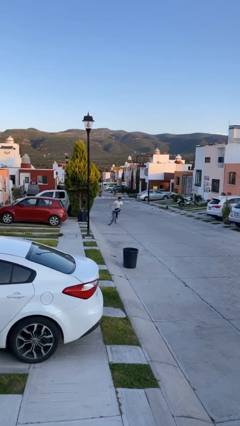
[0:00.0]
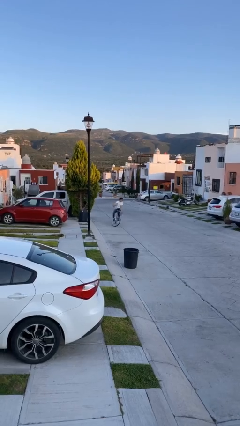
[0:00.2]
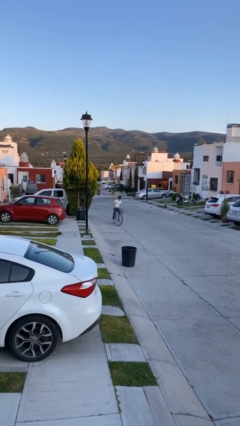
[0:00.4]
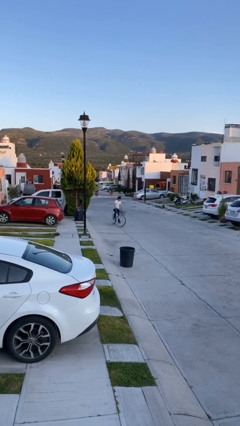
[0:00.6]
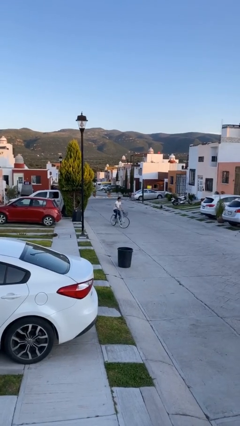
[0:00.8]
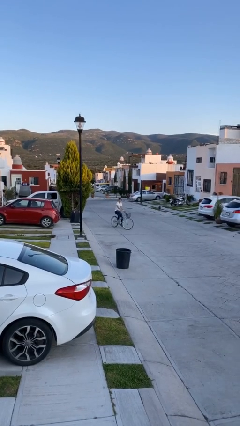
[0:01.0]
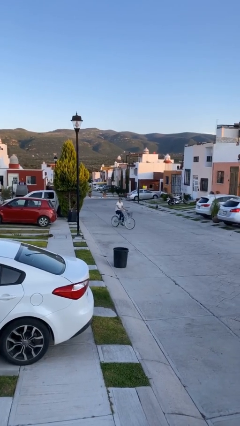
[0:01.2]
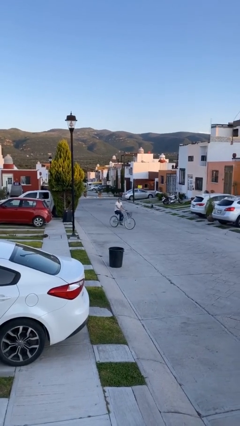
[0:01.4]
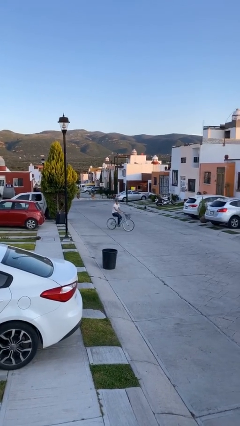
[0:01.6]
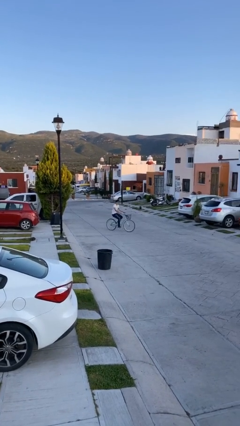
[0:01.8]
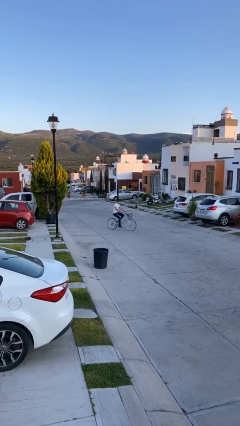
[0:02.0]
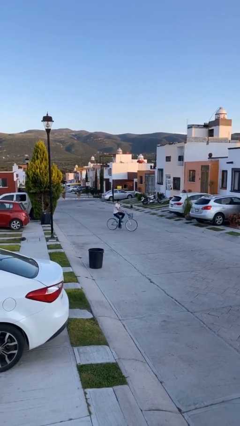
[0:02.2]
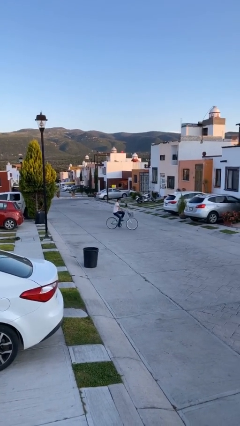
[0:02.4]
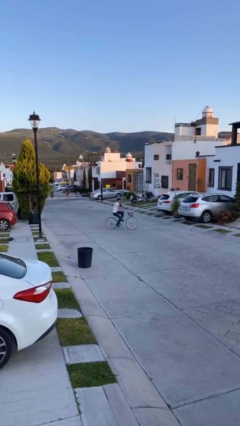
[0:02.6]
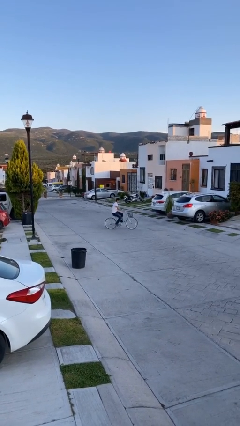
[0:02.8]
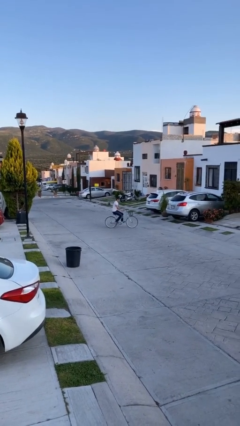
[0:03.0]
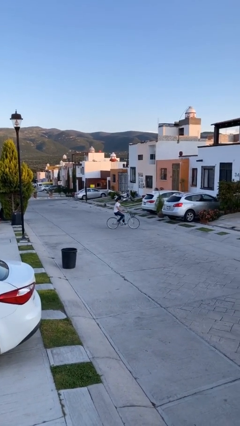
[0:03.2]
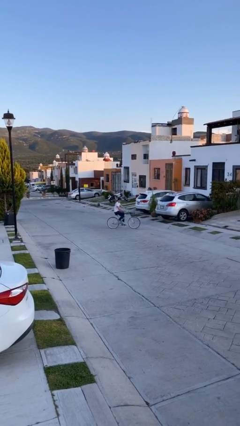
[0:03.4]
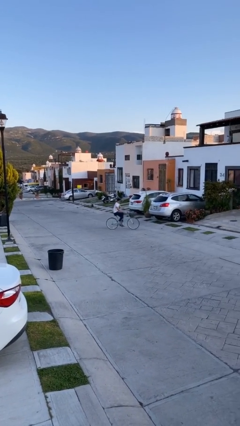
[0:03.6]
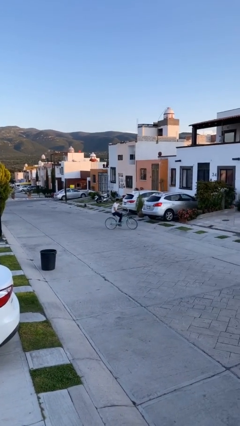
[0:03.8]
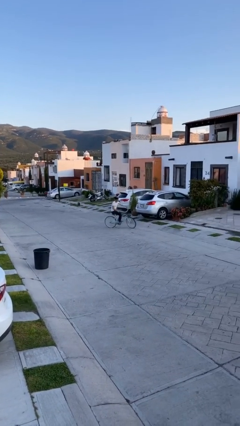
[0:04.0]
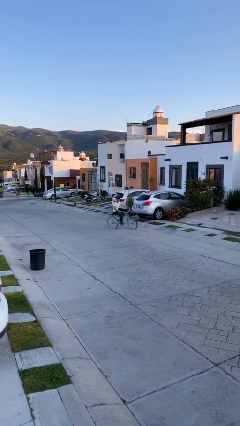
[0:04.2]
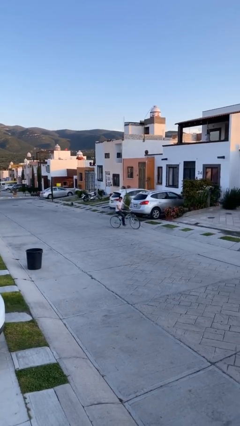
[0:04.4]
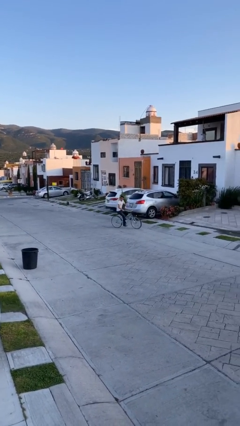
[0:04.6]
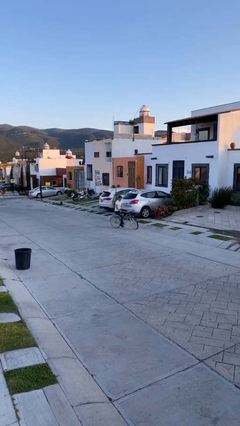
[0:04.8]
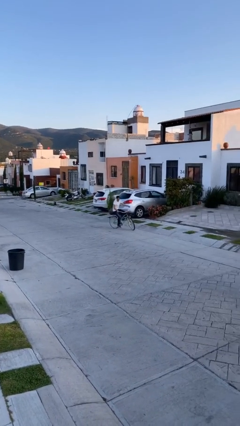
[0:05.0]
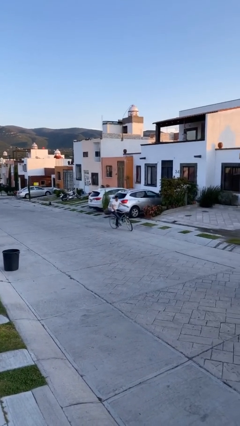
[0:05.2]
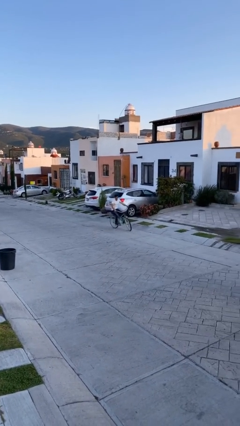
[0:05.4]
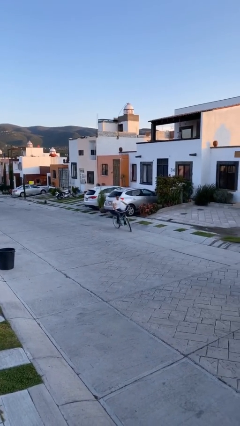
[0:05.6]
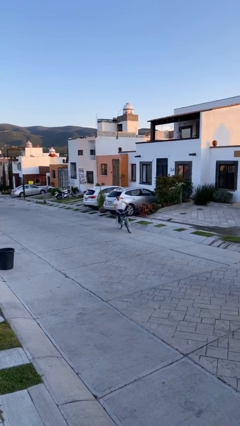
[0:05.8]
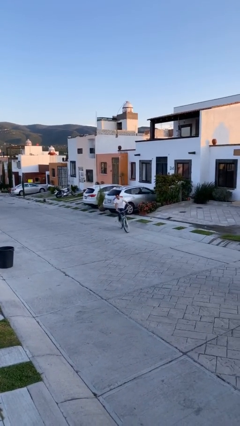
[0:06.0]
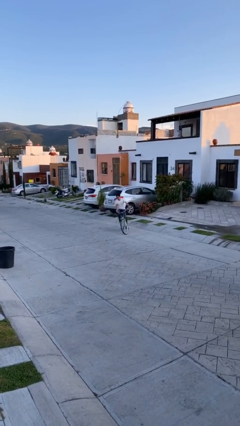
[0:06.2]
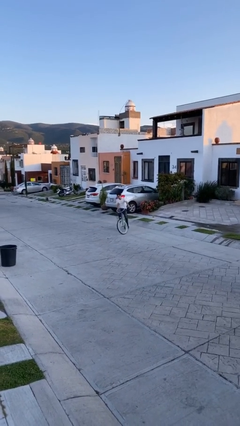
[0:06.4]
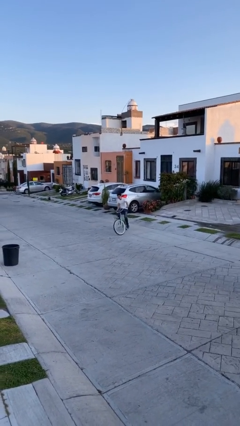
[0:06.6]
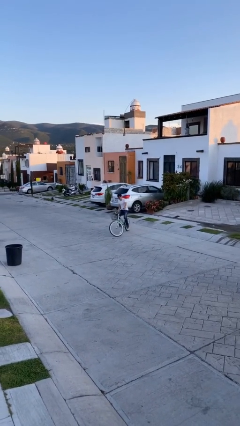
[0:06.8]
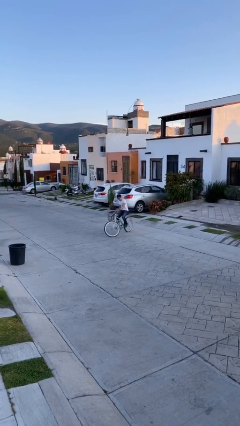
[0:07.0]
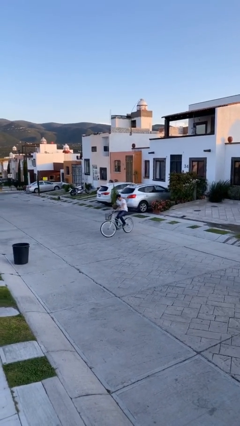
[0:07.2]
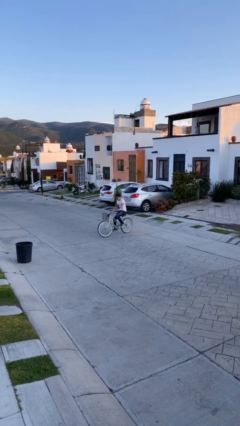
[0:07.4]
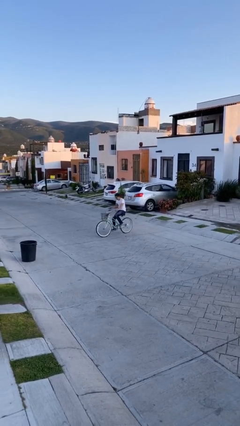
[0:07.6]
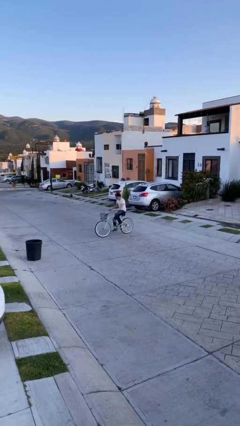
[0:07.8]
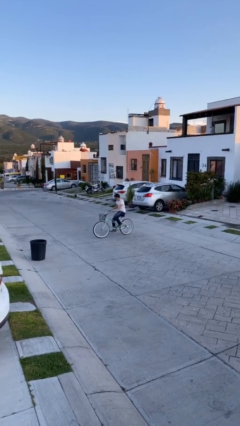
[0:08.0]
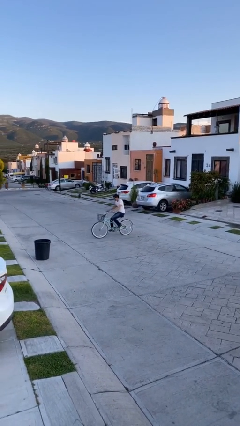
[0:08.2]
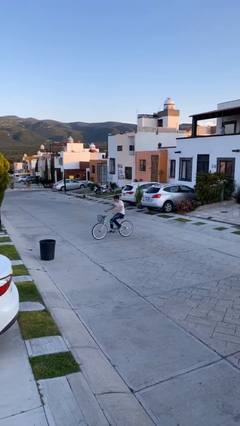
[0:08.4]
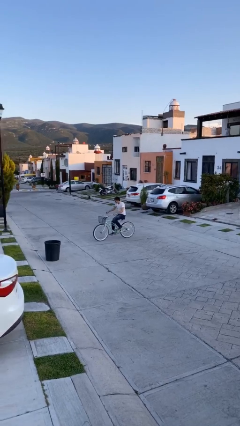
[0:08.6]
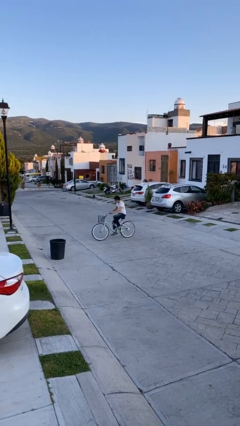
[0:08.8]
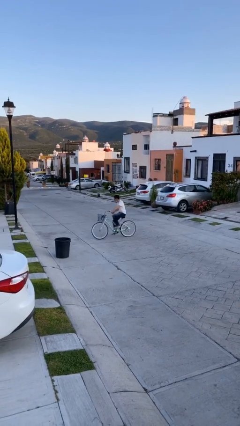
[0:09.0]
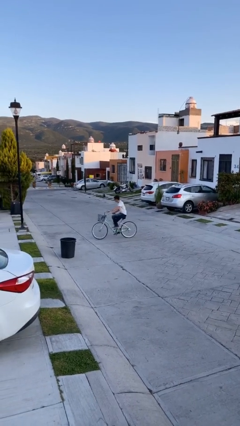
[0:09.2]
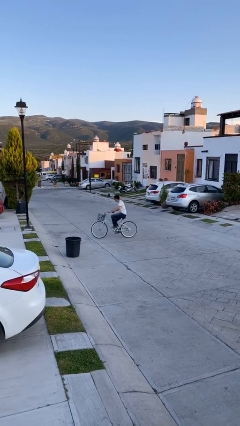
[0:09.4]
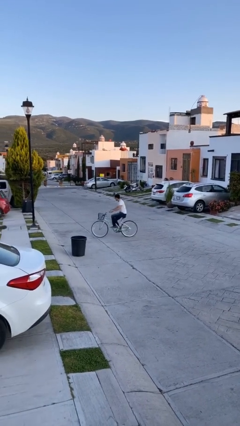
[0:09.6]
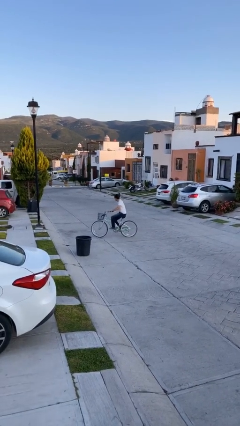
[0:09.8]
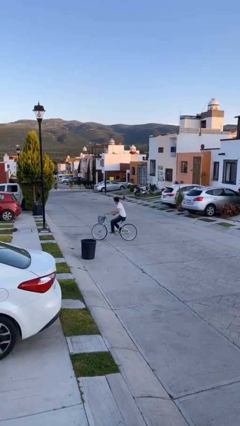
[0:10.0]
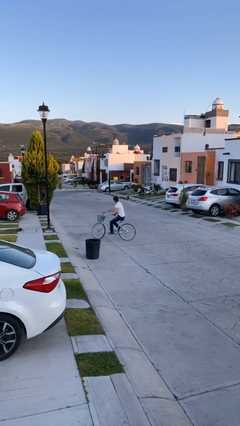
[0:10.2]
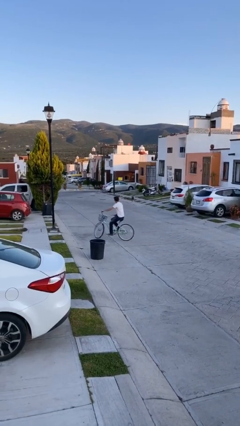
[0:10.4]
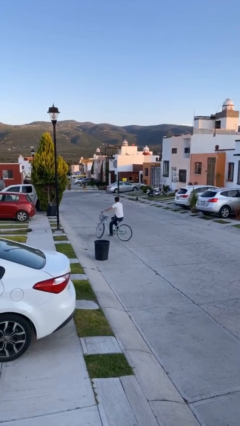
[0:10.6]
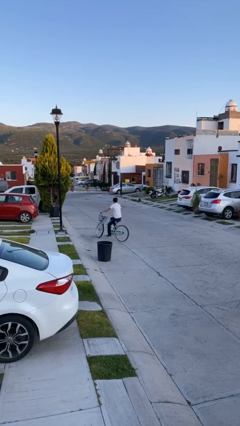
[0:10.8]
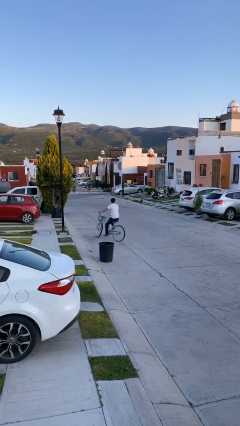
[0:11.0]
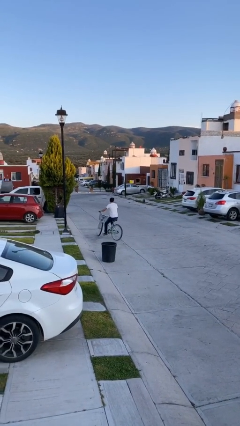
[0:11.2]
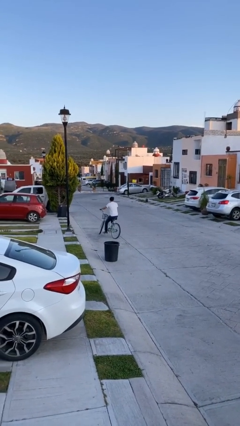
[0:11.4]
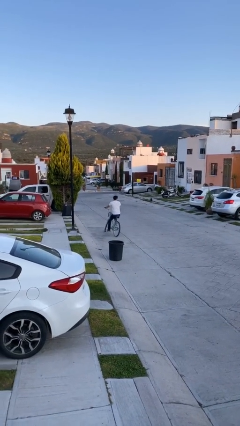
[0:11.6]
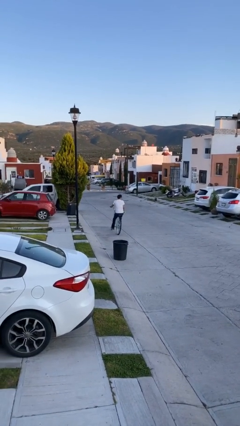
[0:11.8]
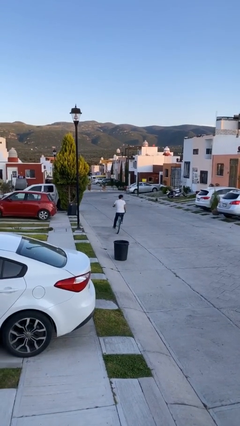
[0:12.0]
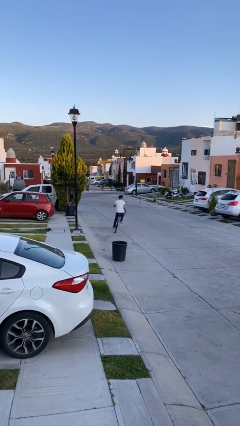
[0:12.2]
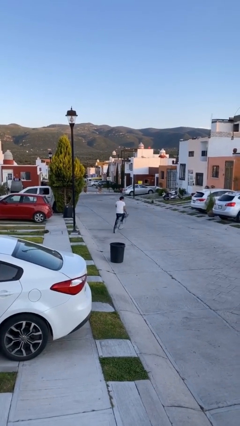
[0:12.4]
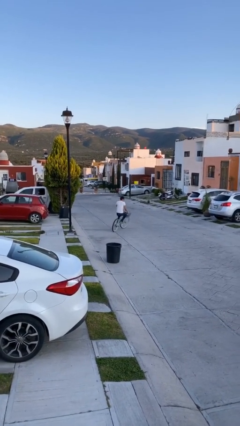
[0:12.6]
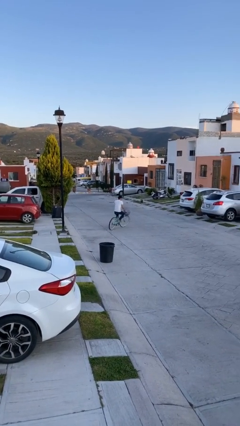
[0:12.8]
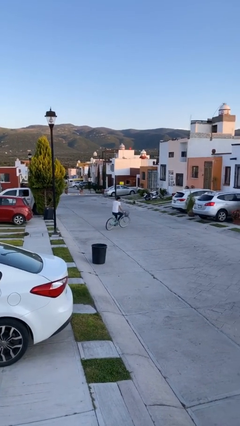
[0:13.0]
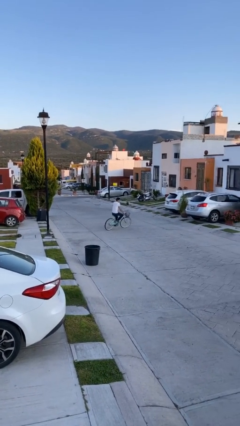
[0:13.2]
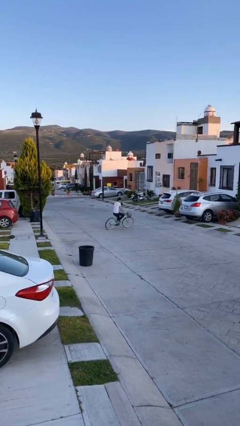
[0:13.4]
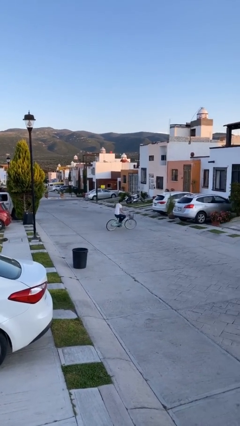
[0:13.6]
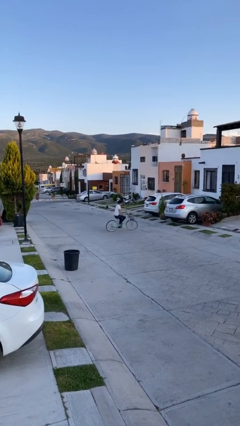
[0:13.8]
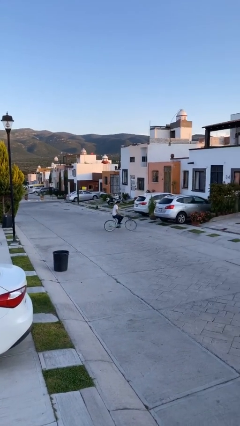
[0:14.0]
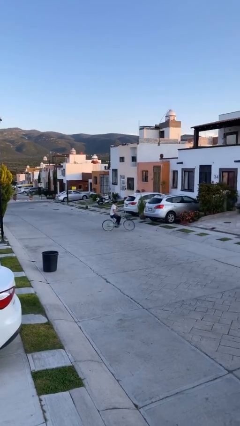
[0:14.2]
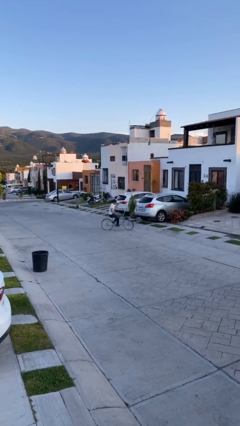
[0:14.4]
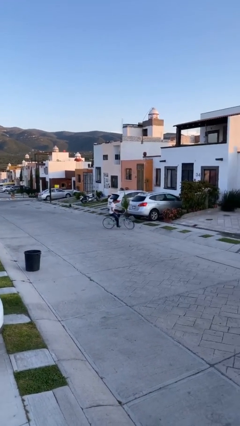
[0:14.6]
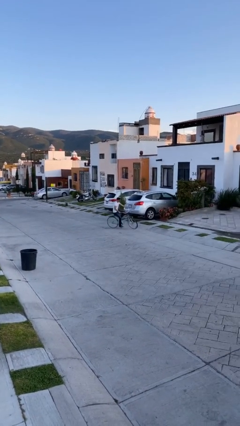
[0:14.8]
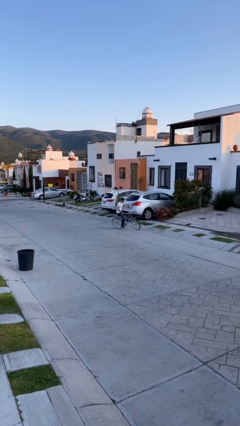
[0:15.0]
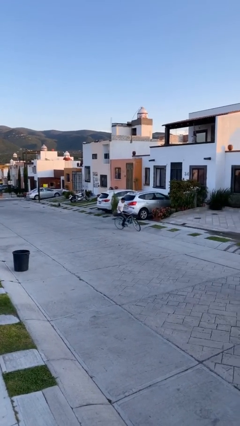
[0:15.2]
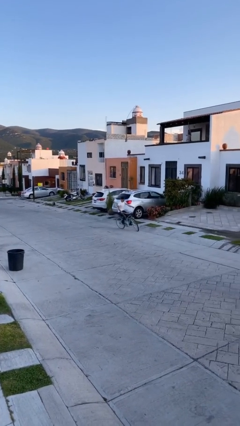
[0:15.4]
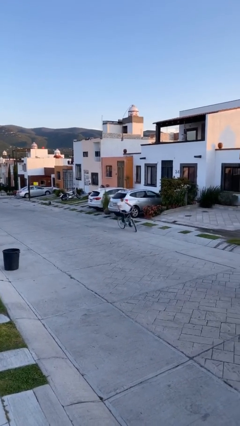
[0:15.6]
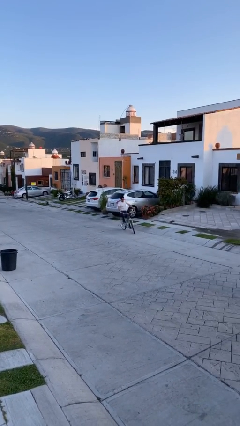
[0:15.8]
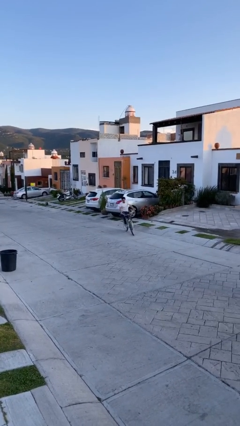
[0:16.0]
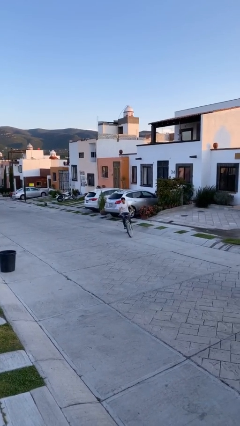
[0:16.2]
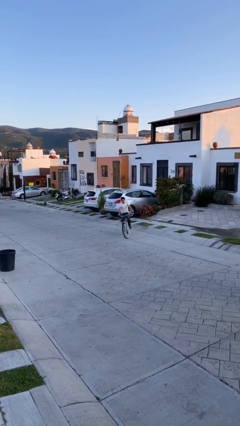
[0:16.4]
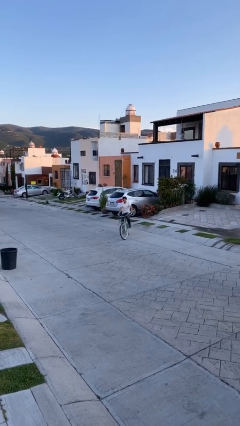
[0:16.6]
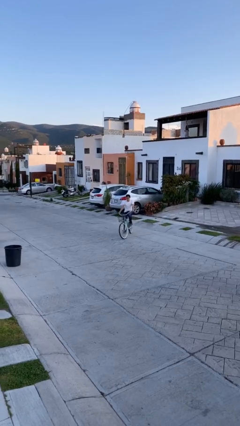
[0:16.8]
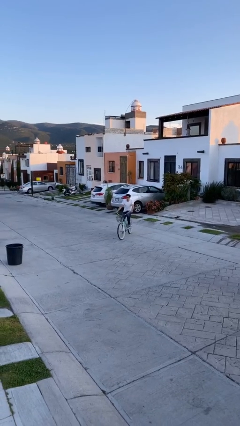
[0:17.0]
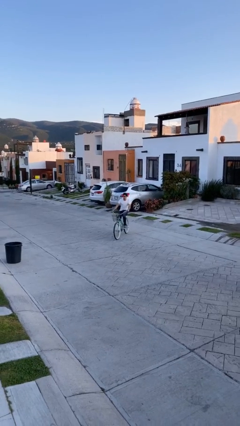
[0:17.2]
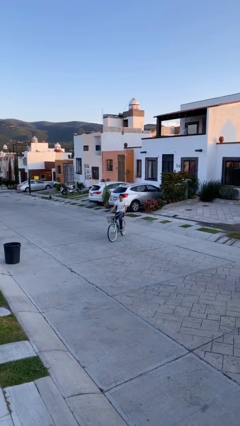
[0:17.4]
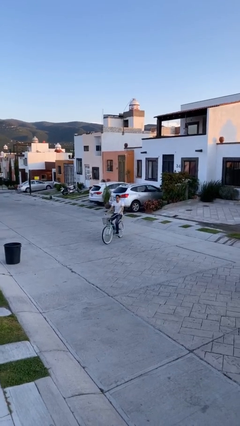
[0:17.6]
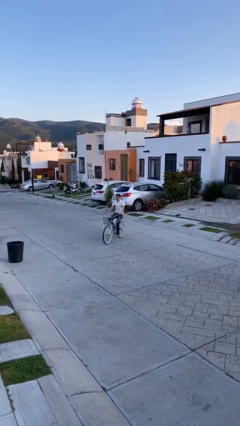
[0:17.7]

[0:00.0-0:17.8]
person rides bicycle

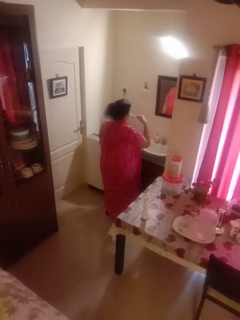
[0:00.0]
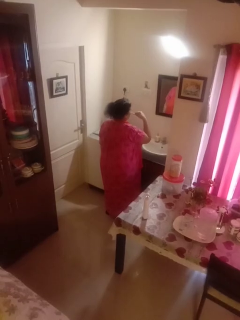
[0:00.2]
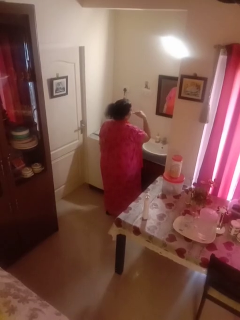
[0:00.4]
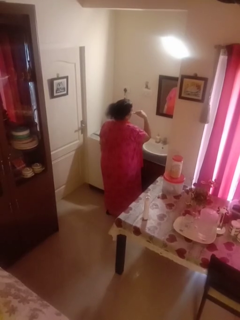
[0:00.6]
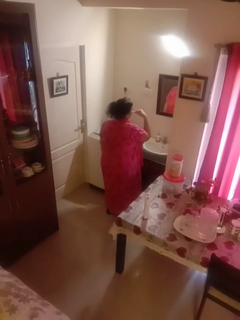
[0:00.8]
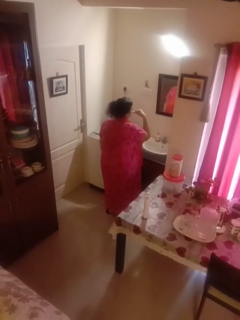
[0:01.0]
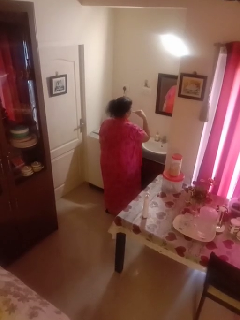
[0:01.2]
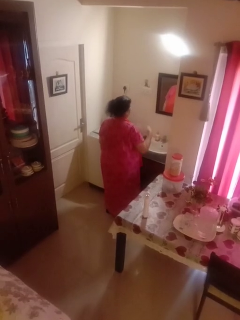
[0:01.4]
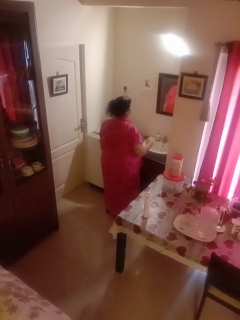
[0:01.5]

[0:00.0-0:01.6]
person brushes teeth
